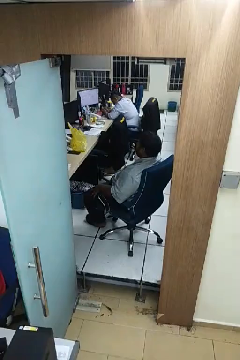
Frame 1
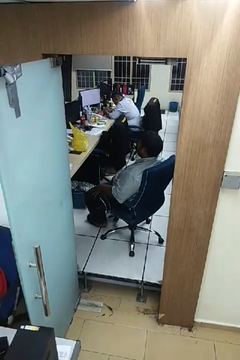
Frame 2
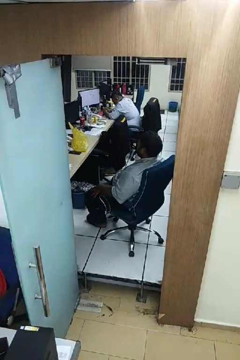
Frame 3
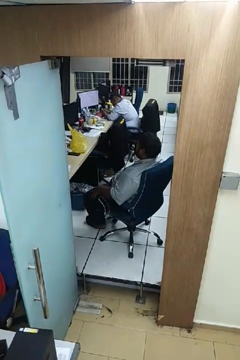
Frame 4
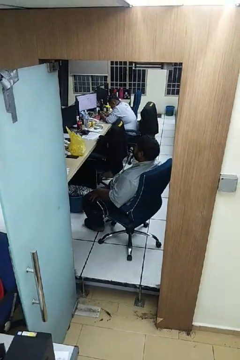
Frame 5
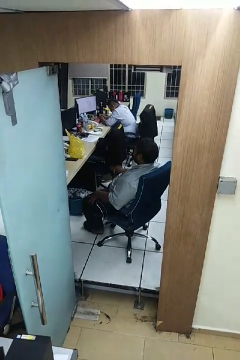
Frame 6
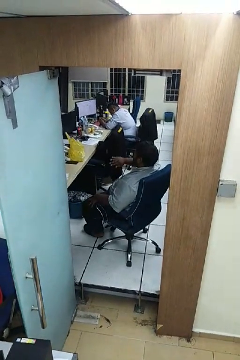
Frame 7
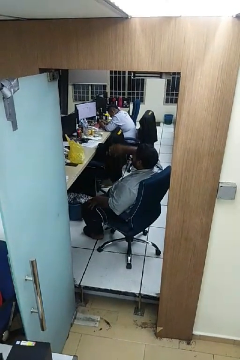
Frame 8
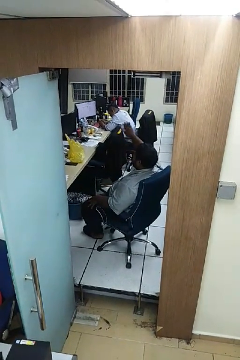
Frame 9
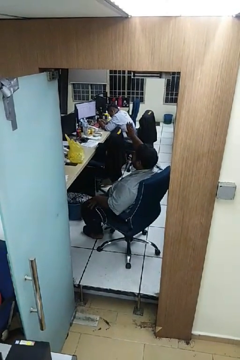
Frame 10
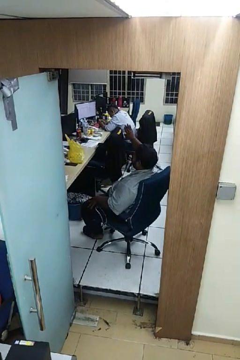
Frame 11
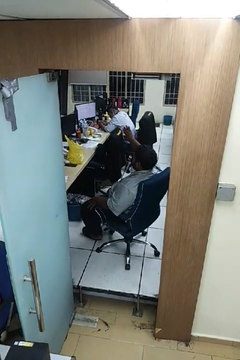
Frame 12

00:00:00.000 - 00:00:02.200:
person gestures swipe up

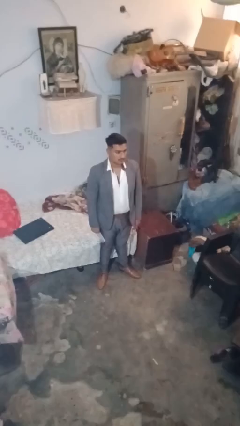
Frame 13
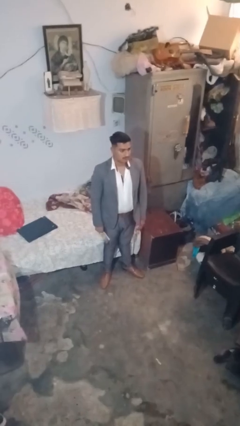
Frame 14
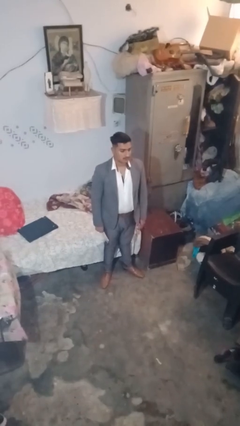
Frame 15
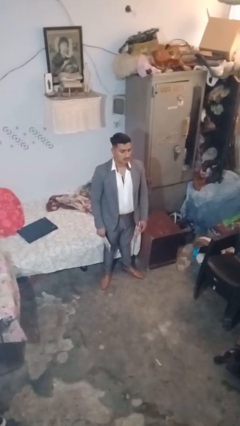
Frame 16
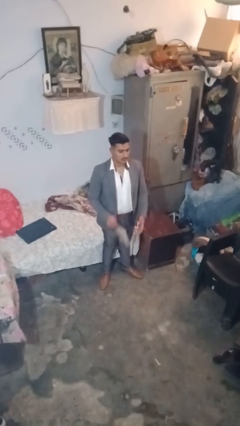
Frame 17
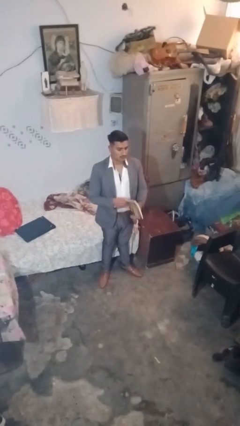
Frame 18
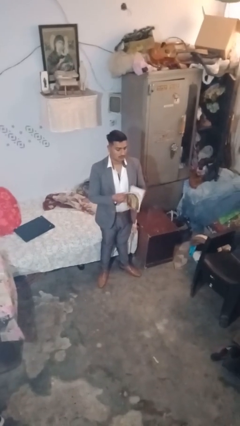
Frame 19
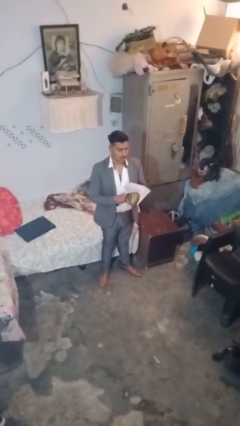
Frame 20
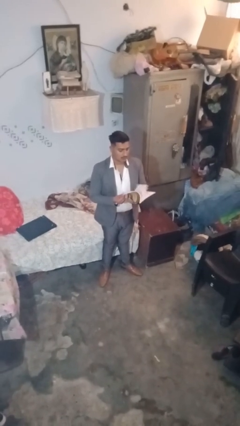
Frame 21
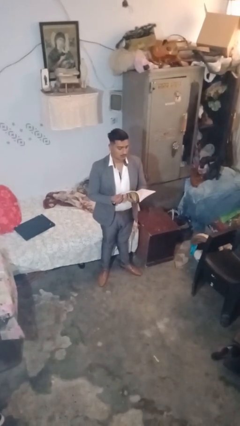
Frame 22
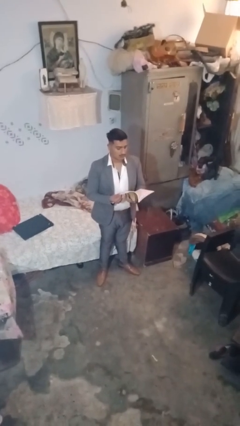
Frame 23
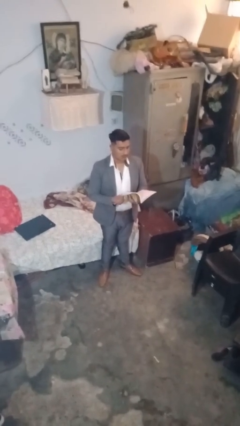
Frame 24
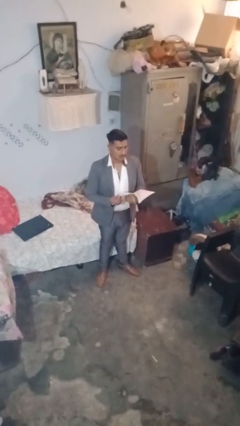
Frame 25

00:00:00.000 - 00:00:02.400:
person reads document

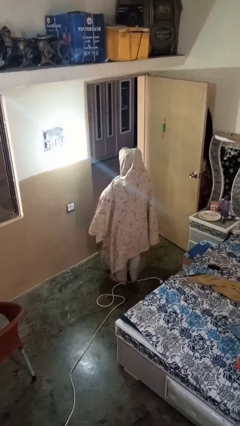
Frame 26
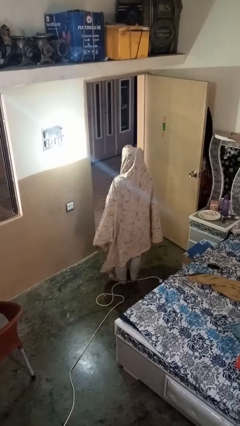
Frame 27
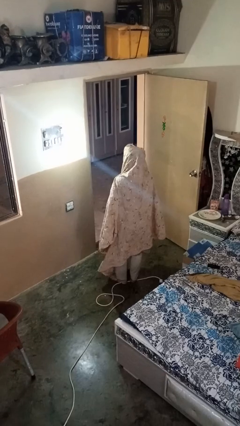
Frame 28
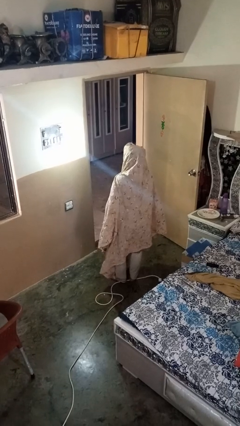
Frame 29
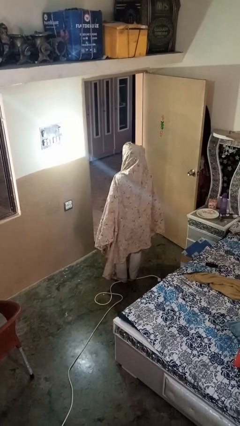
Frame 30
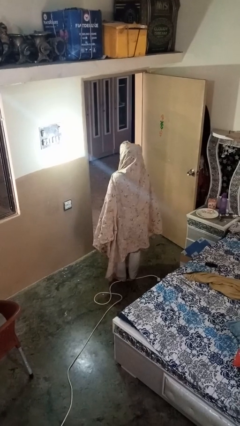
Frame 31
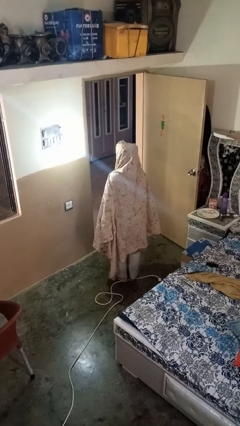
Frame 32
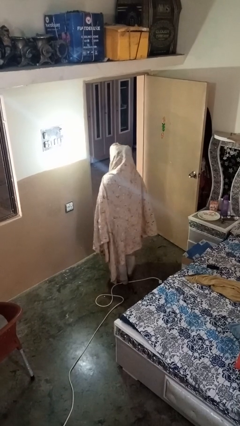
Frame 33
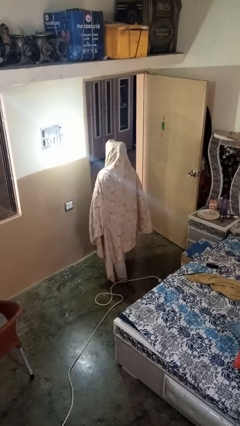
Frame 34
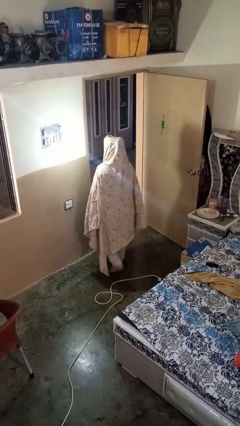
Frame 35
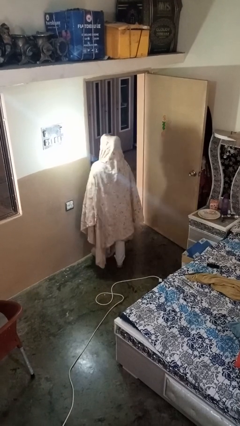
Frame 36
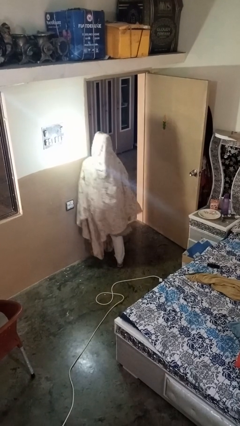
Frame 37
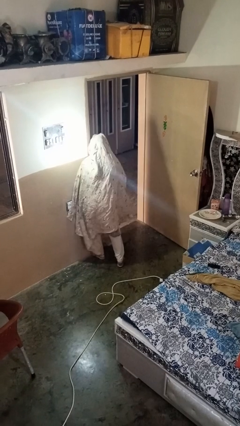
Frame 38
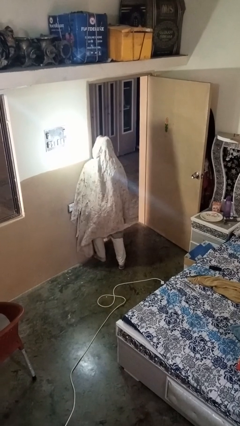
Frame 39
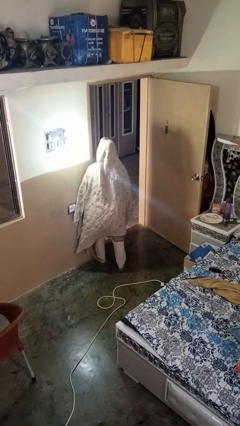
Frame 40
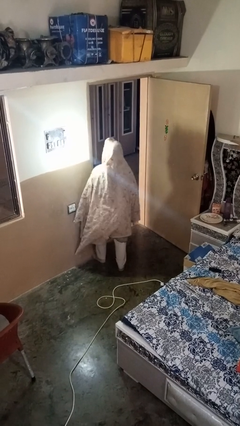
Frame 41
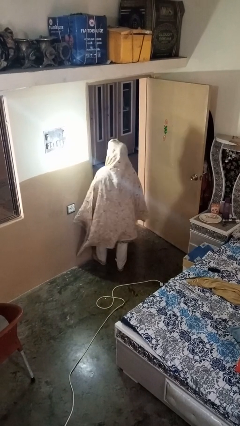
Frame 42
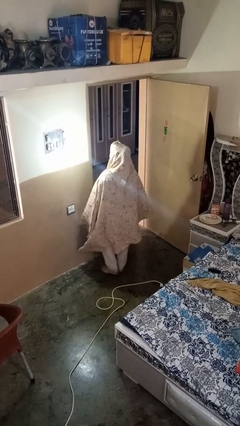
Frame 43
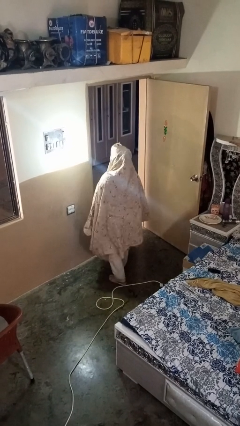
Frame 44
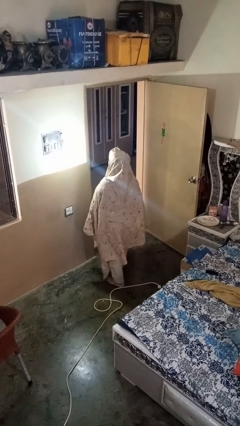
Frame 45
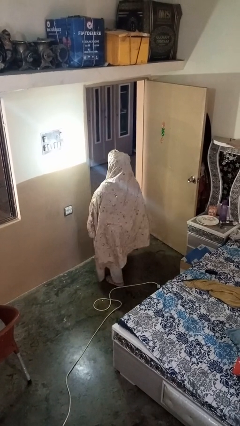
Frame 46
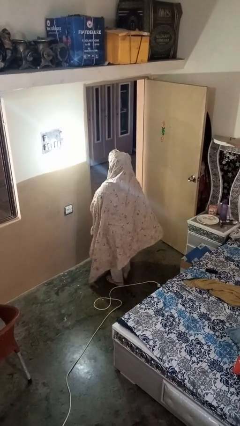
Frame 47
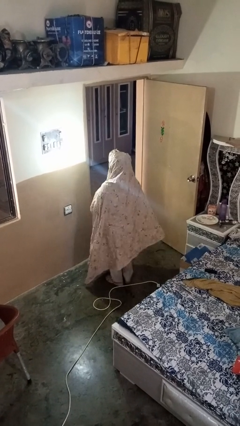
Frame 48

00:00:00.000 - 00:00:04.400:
person bumps into wall

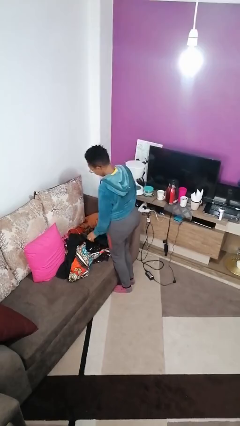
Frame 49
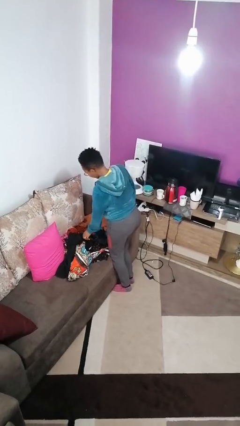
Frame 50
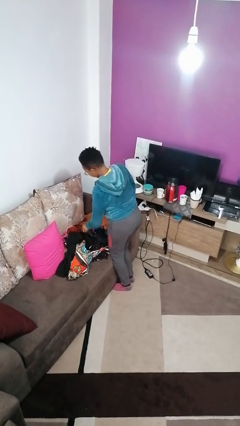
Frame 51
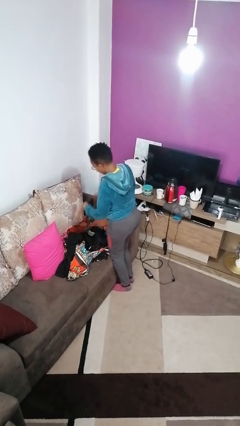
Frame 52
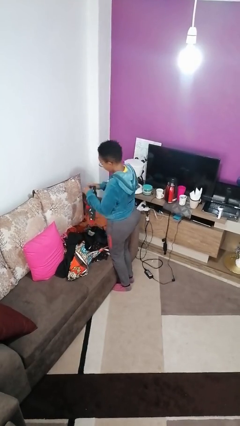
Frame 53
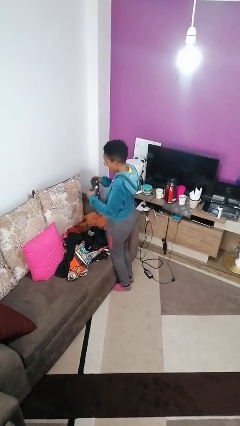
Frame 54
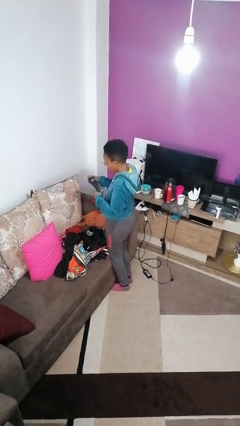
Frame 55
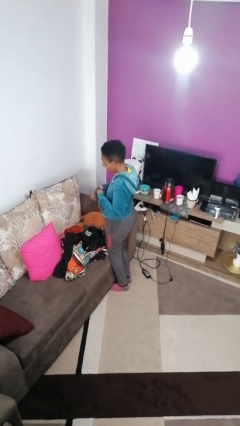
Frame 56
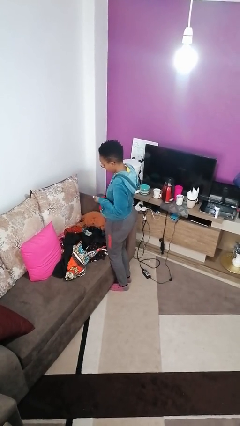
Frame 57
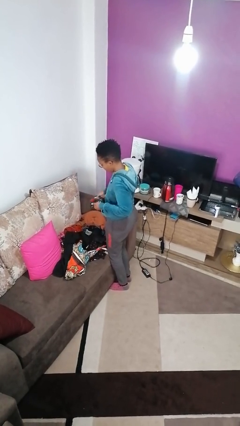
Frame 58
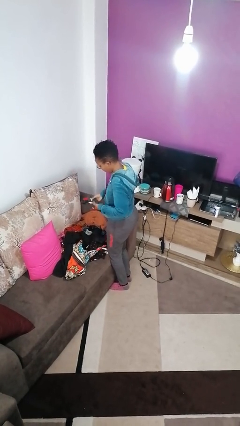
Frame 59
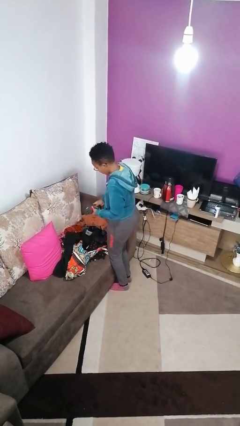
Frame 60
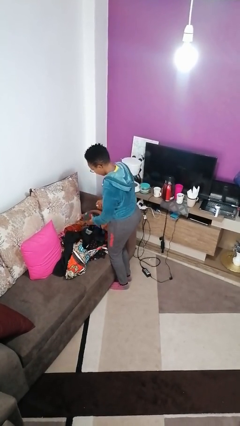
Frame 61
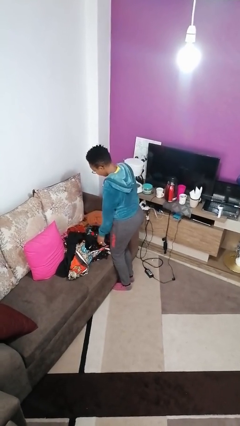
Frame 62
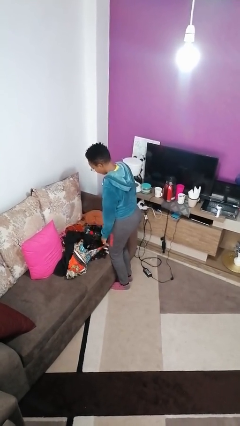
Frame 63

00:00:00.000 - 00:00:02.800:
person folds socks

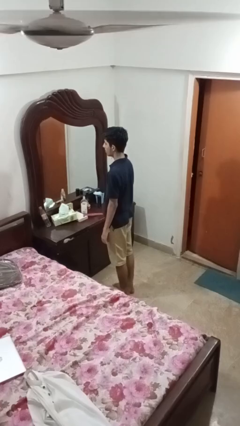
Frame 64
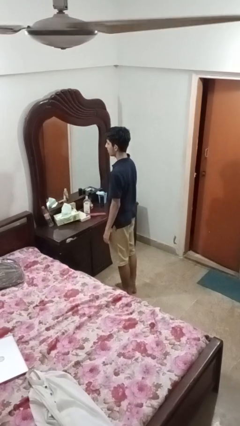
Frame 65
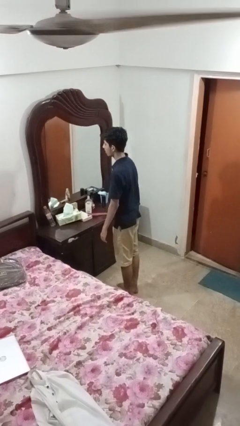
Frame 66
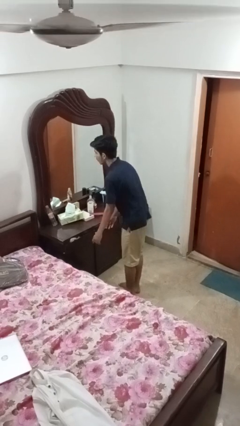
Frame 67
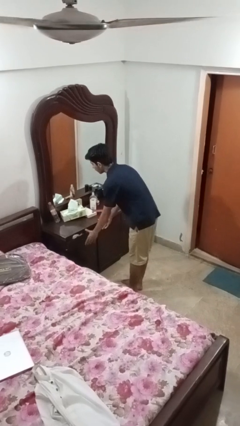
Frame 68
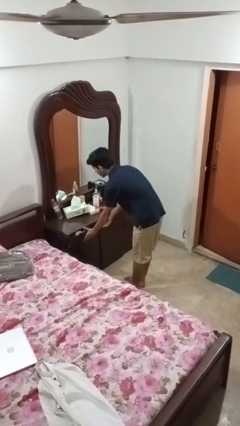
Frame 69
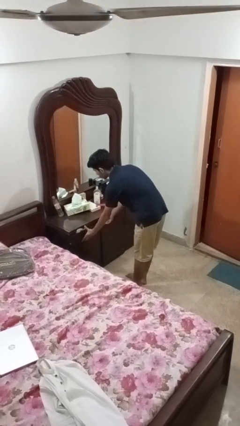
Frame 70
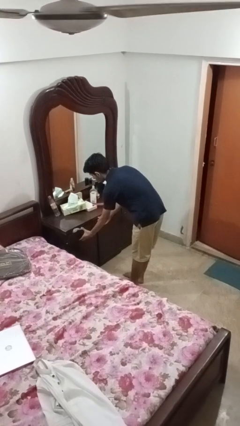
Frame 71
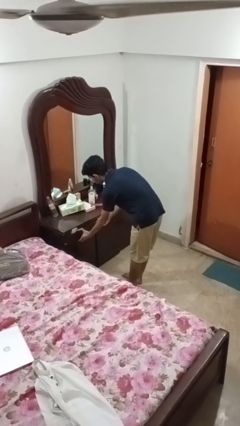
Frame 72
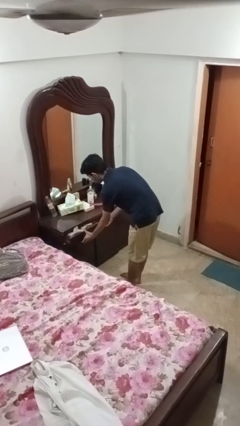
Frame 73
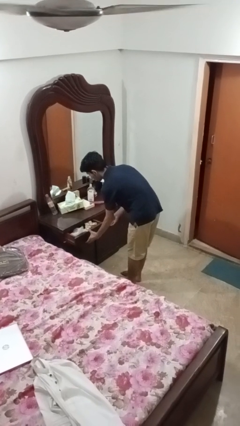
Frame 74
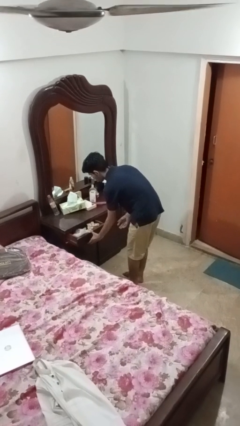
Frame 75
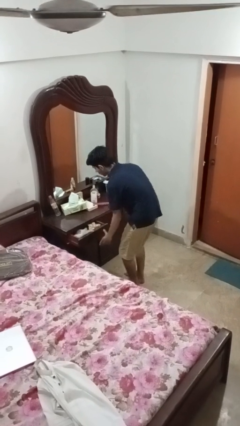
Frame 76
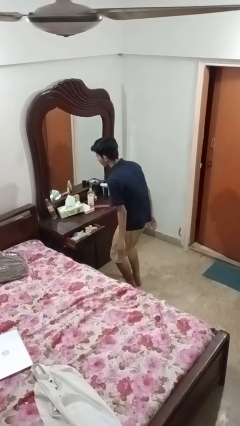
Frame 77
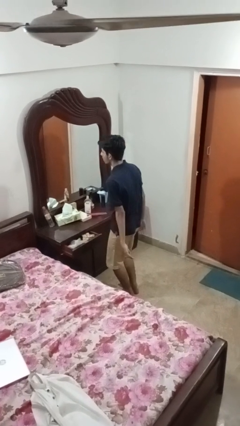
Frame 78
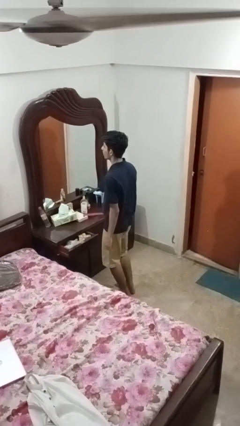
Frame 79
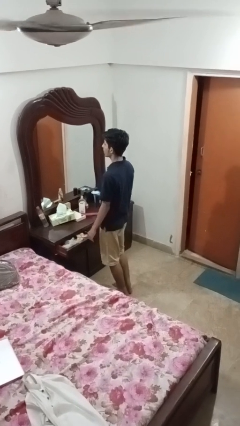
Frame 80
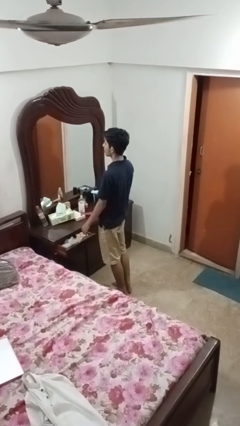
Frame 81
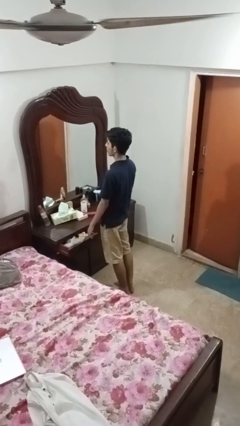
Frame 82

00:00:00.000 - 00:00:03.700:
person opens dresser drawer

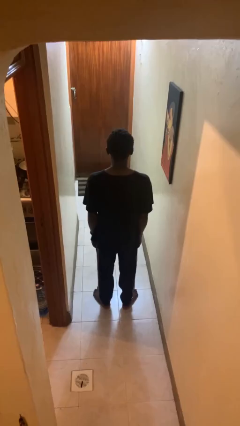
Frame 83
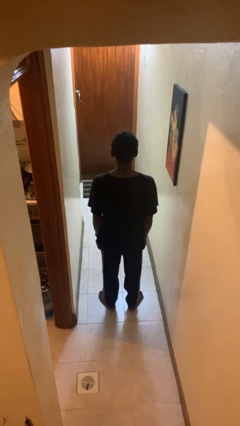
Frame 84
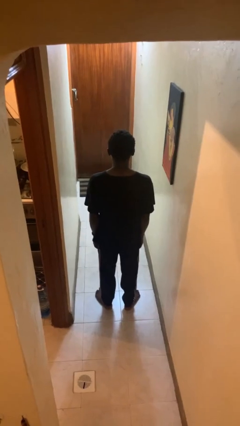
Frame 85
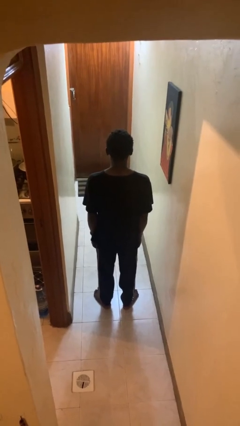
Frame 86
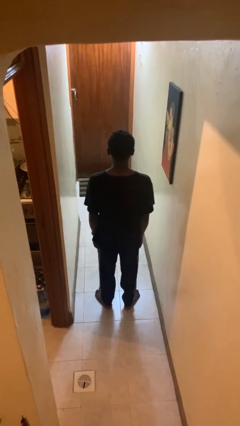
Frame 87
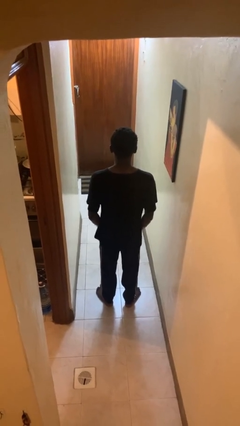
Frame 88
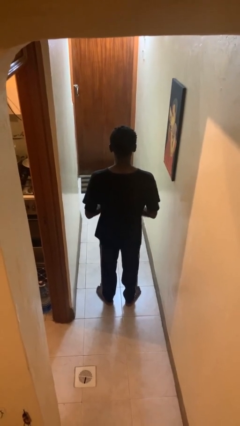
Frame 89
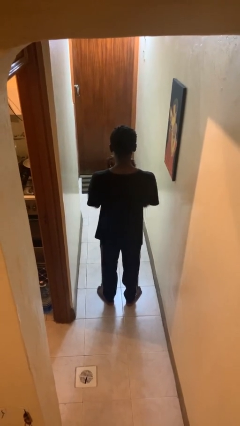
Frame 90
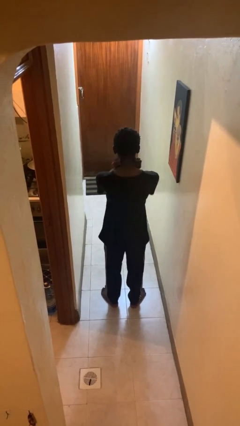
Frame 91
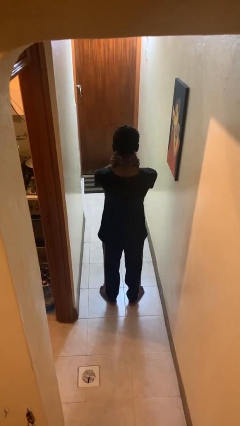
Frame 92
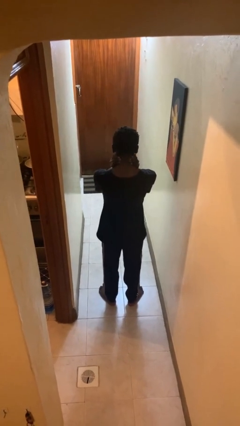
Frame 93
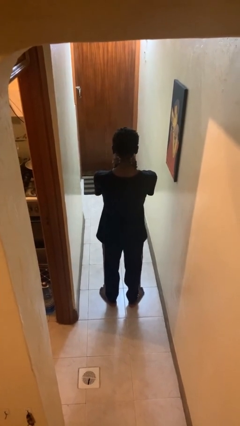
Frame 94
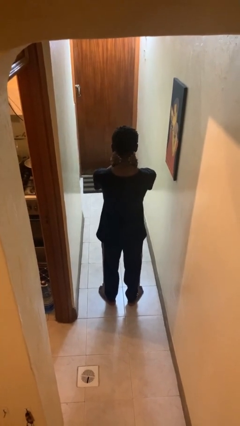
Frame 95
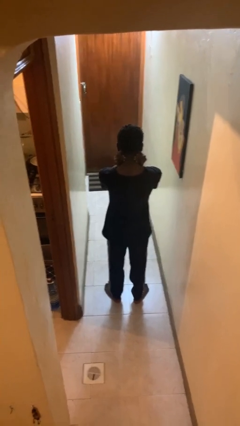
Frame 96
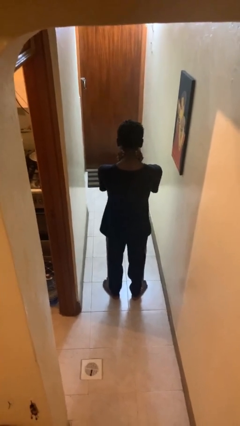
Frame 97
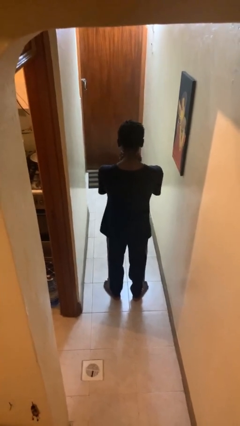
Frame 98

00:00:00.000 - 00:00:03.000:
person rubs neck
